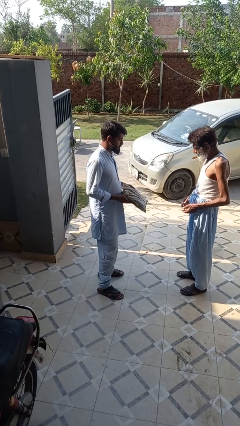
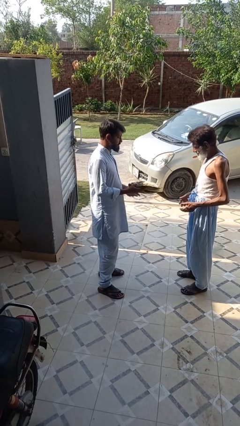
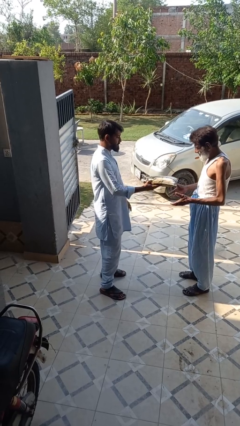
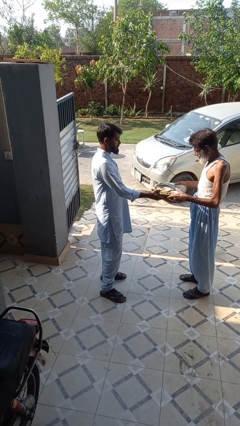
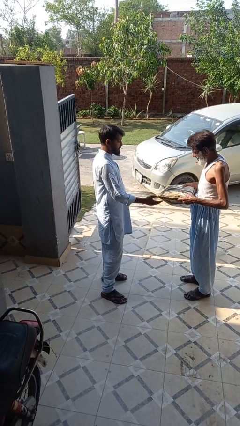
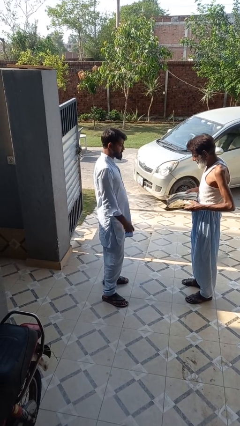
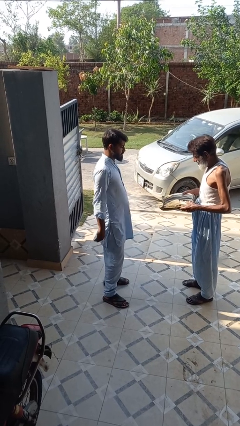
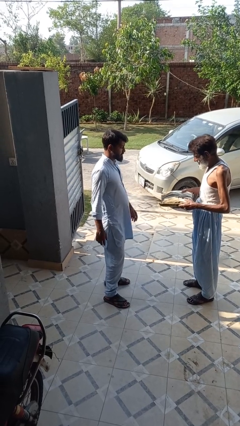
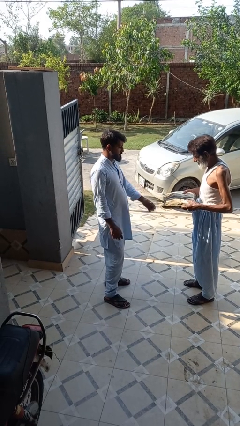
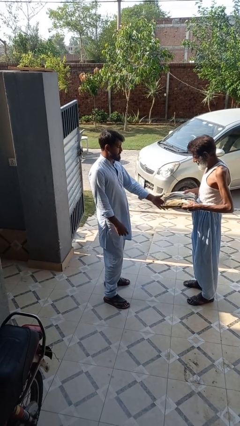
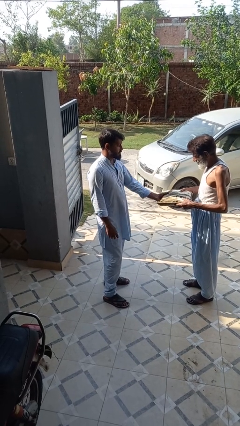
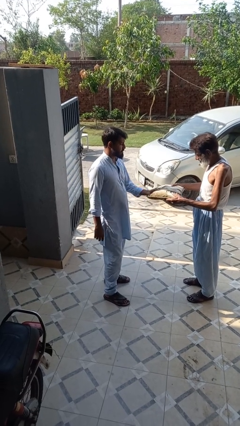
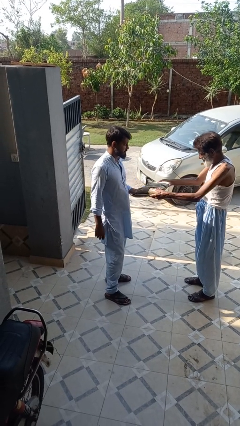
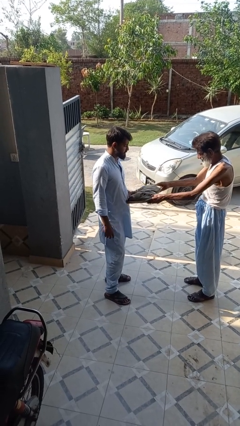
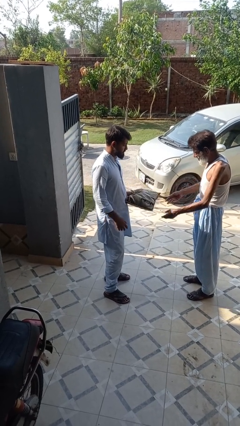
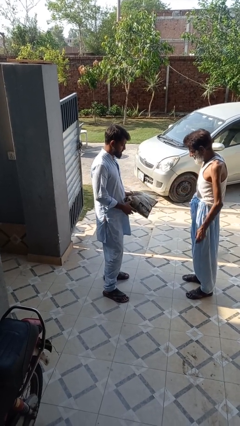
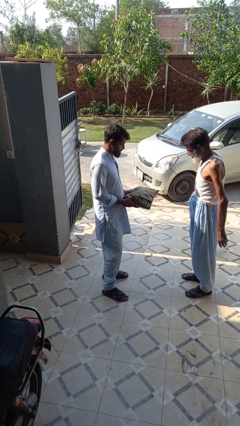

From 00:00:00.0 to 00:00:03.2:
person transfers object to person

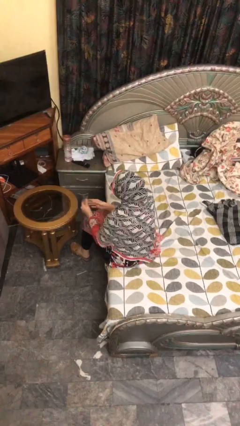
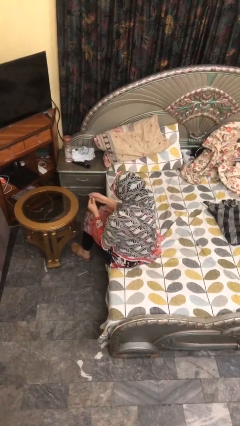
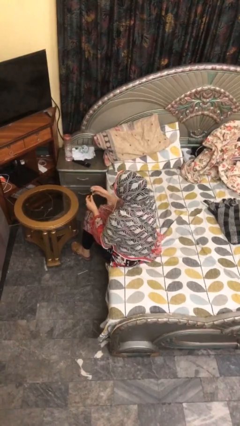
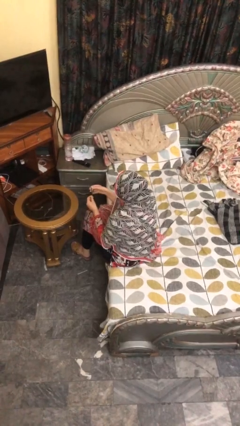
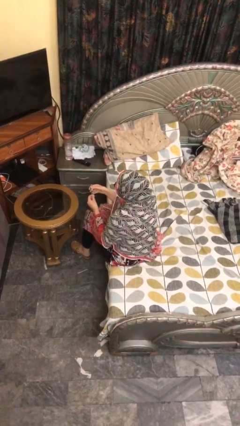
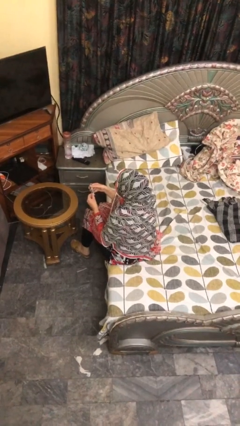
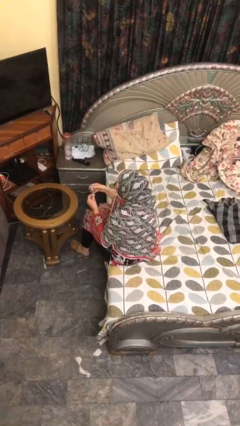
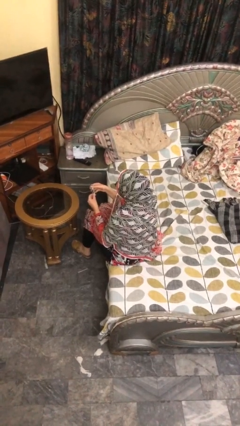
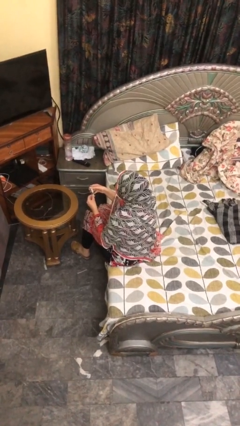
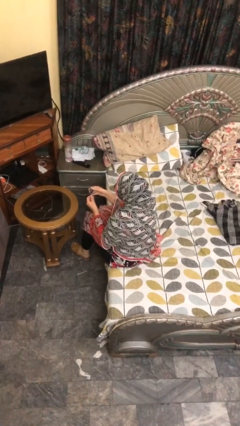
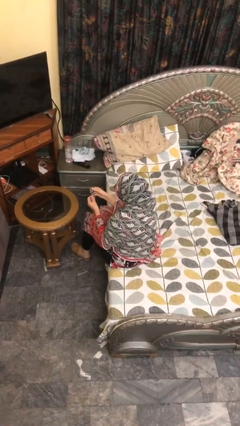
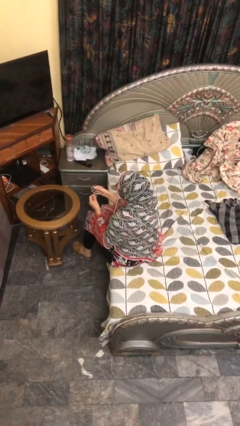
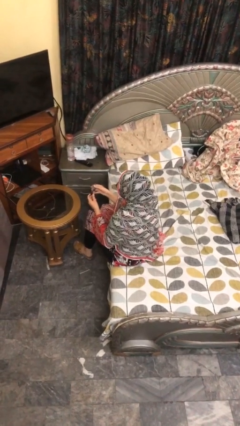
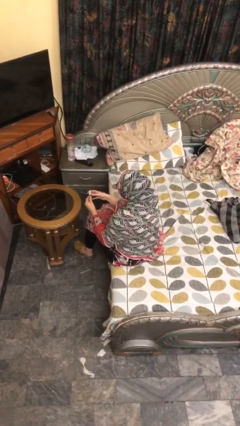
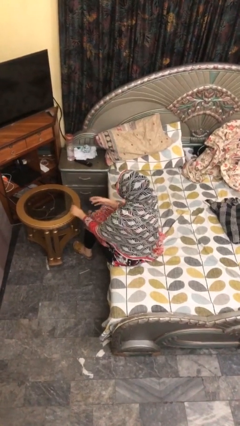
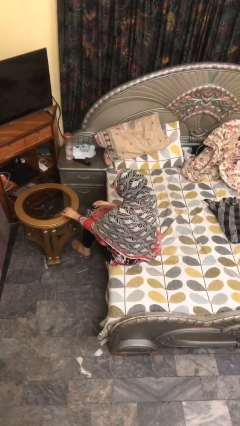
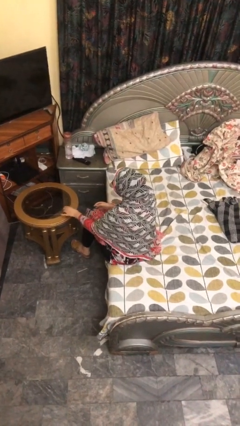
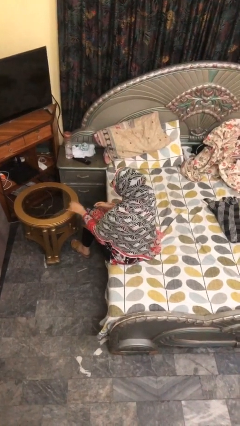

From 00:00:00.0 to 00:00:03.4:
person clips fingernails

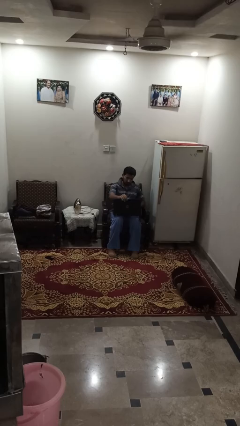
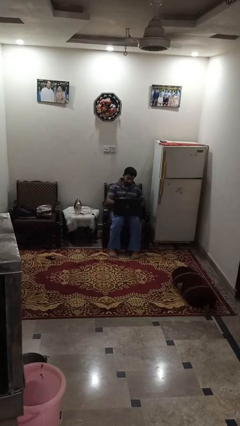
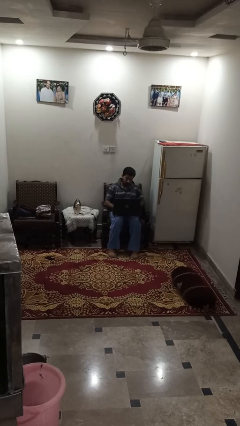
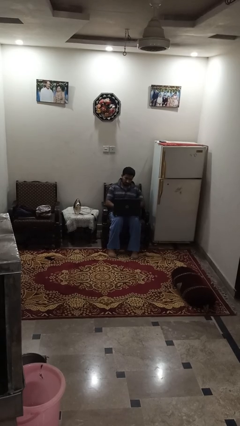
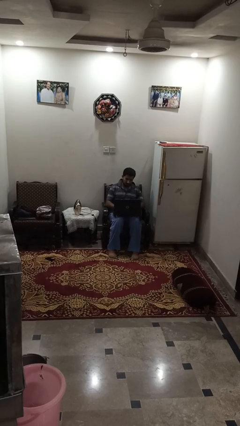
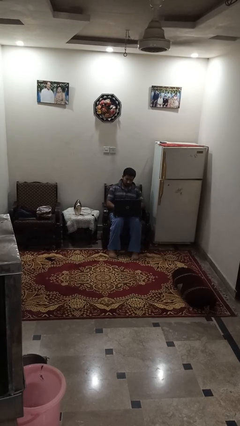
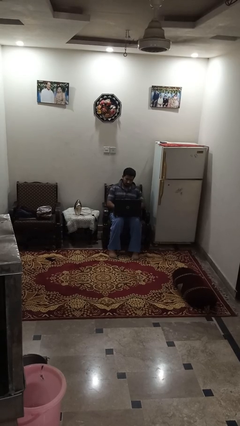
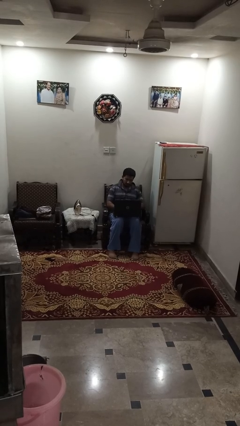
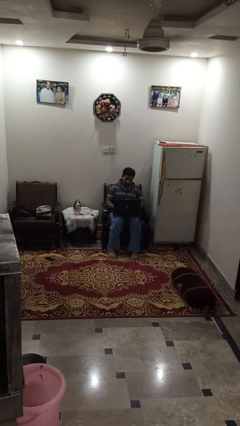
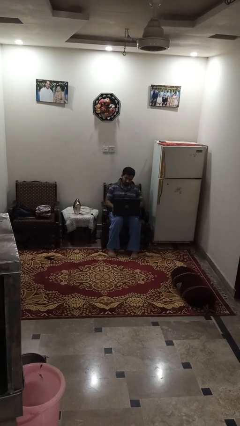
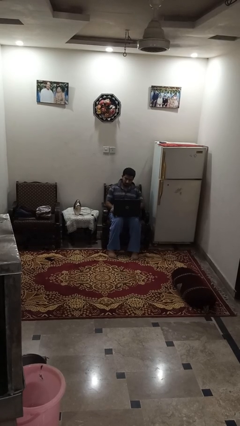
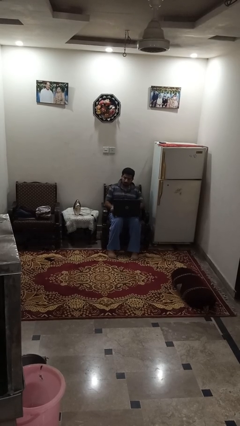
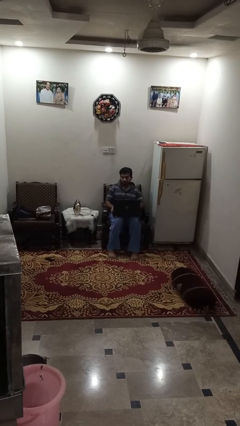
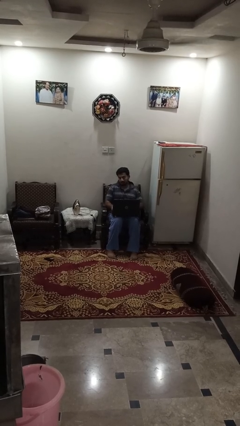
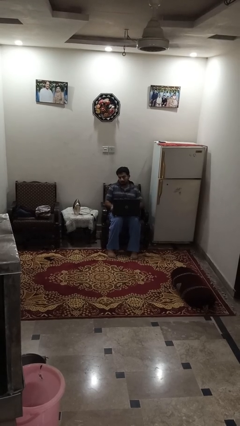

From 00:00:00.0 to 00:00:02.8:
person opens laptop

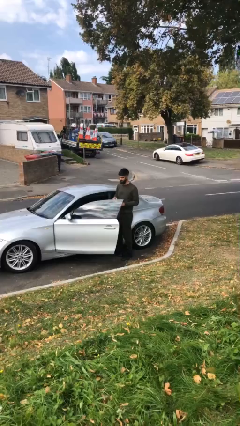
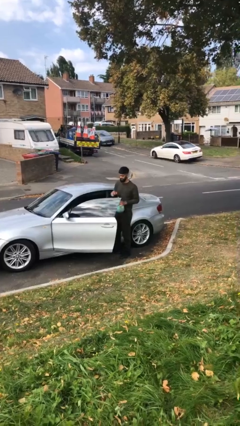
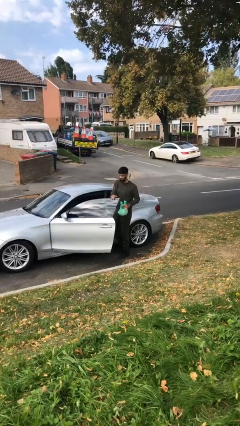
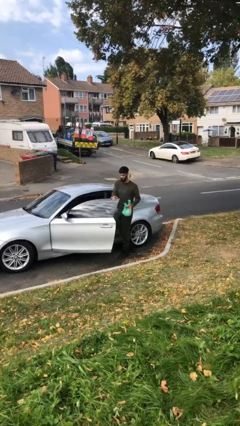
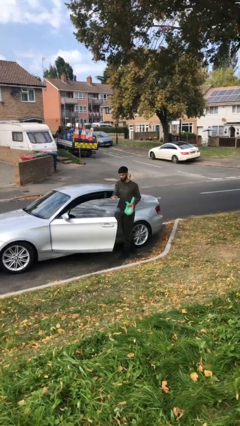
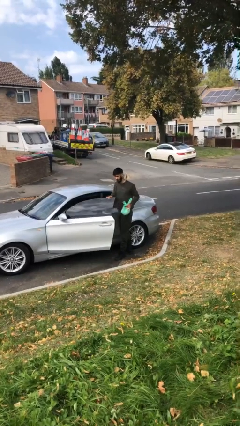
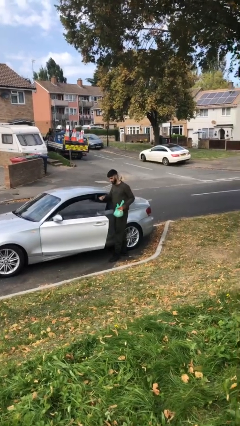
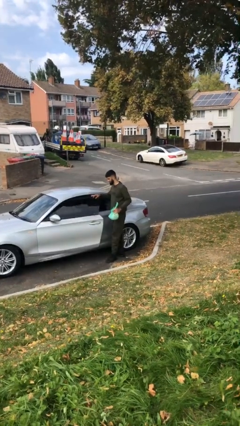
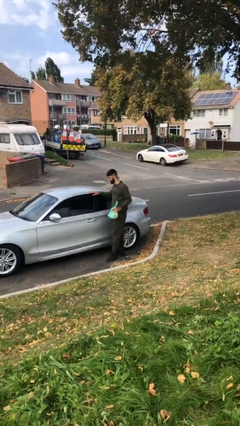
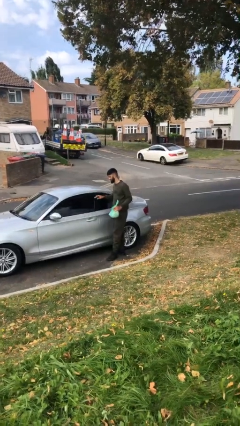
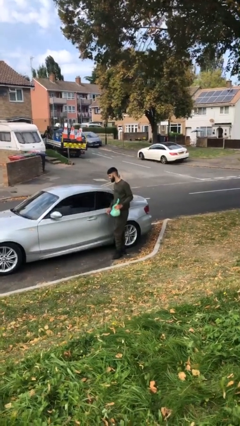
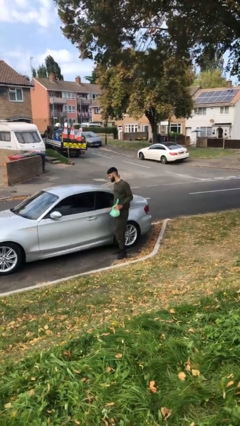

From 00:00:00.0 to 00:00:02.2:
person closes car door

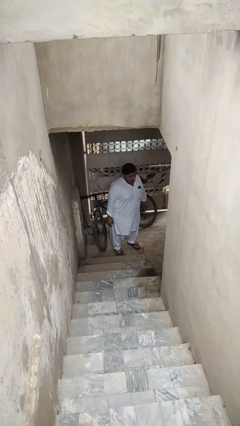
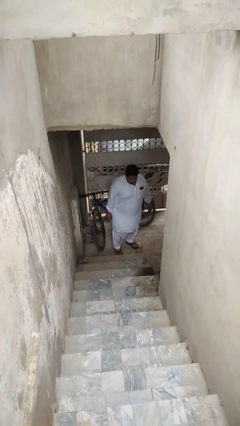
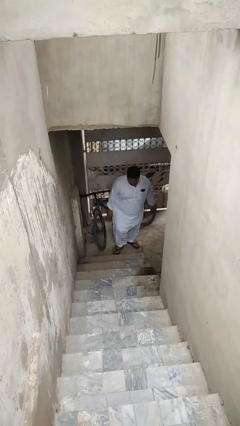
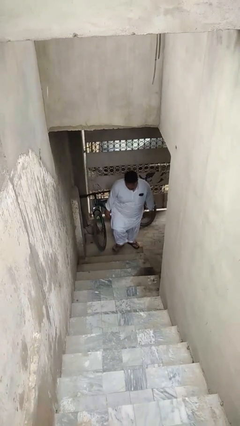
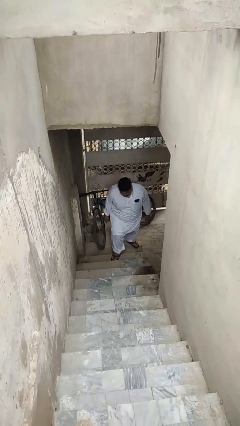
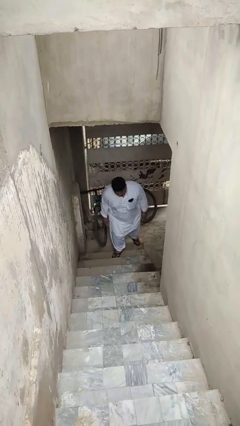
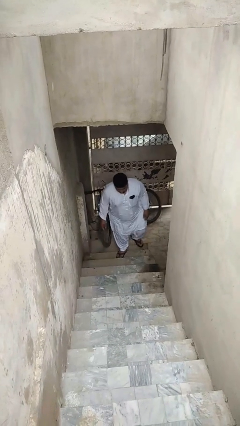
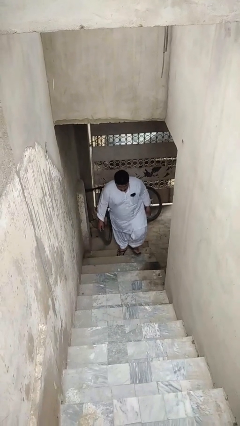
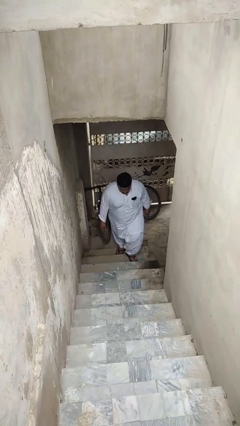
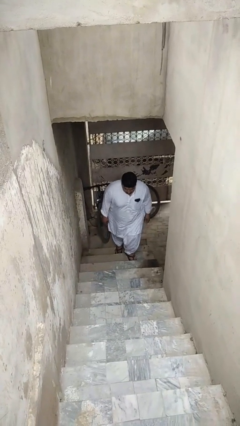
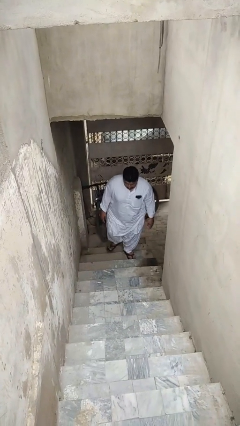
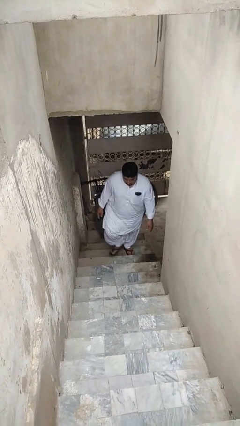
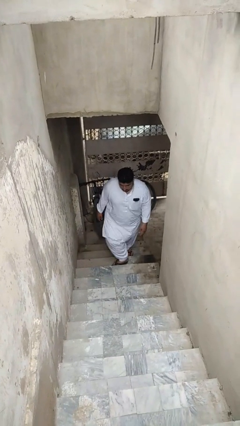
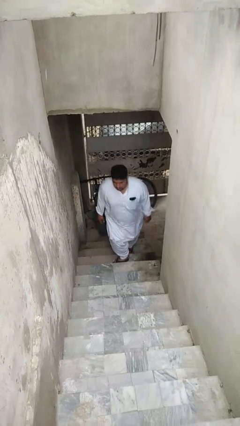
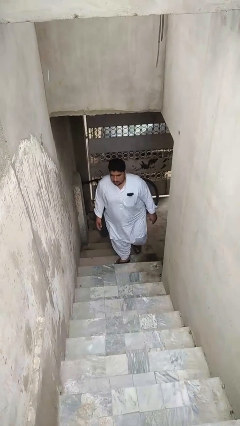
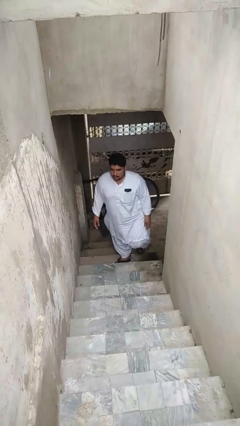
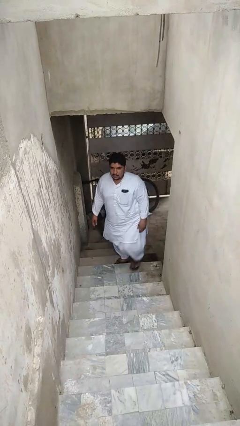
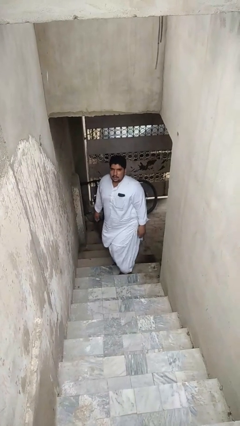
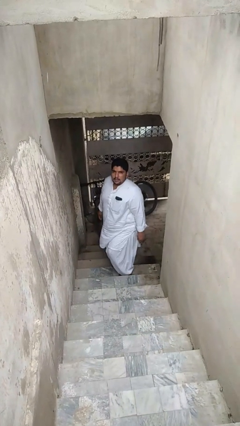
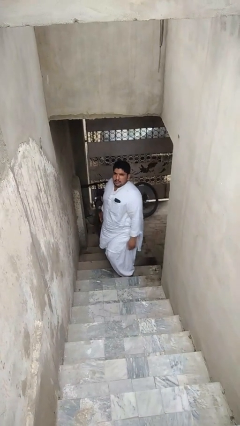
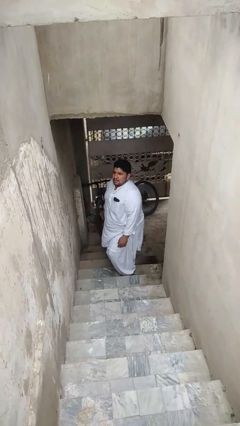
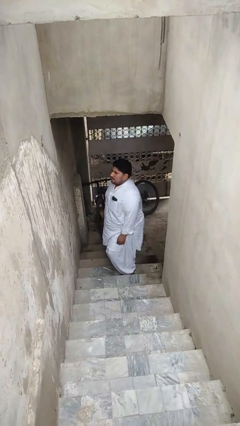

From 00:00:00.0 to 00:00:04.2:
person climbs up stairs

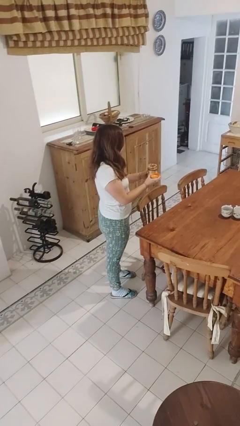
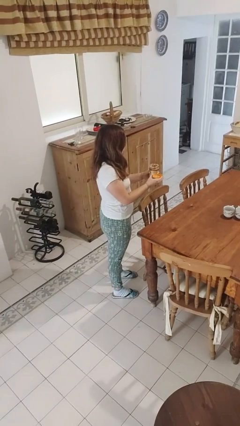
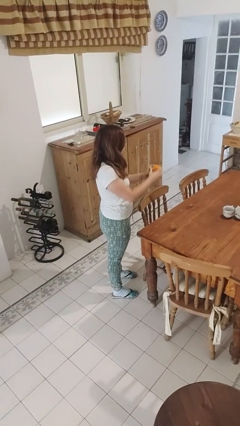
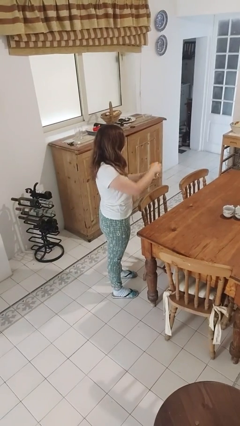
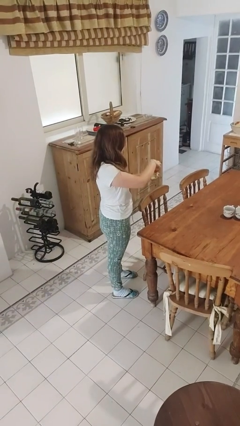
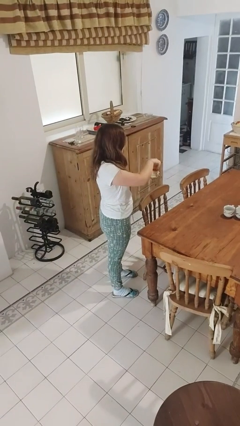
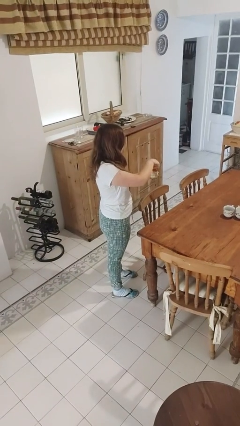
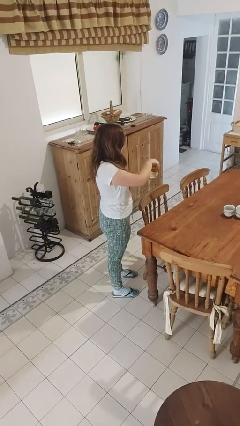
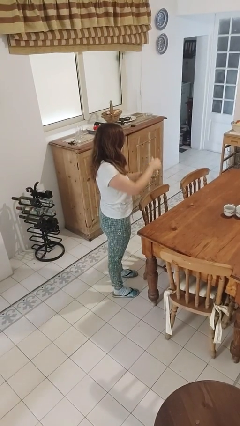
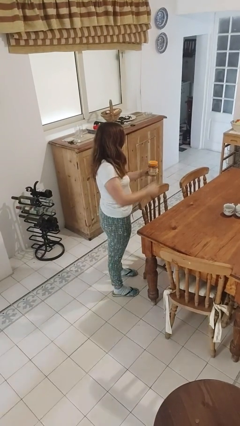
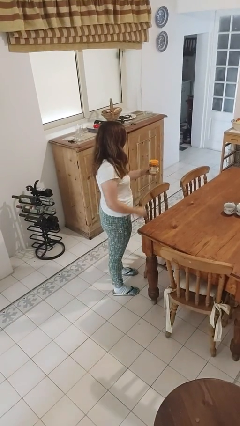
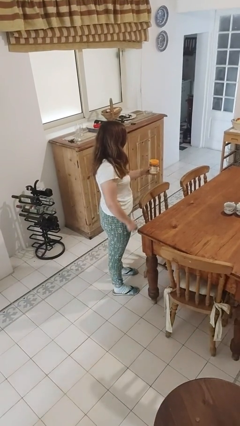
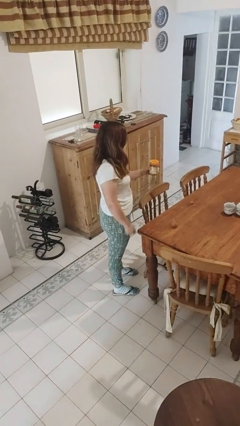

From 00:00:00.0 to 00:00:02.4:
person closes jar
